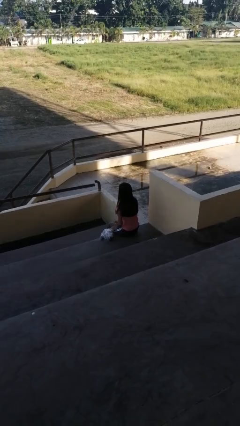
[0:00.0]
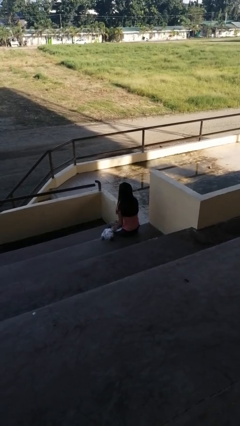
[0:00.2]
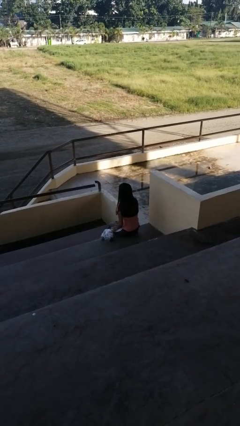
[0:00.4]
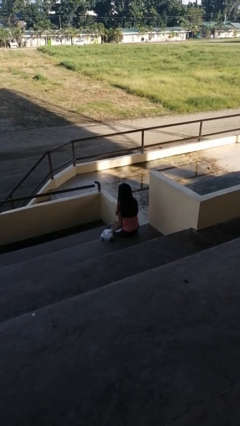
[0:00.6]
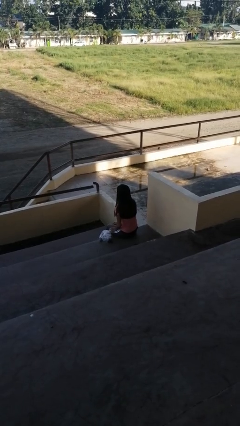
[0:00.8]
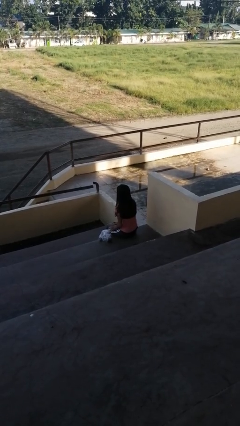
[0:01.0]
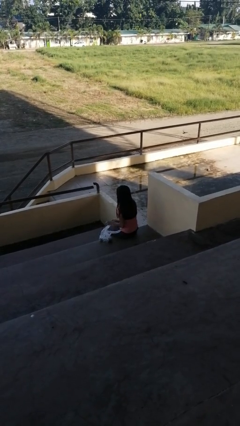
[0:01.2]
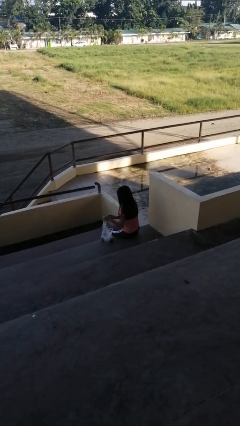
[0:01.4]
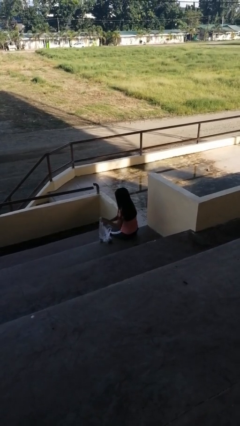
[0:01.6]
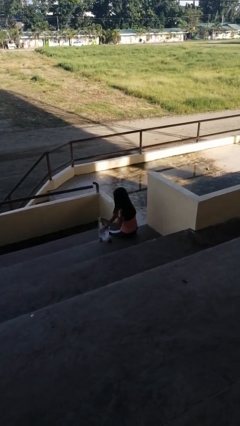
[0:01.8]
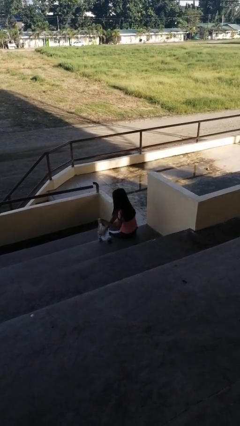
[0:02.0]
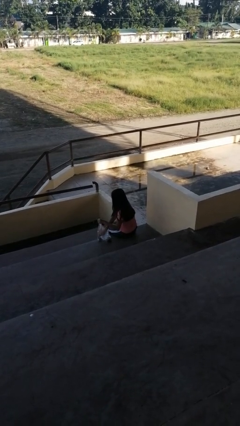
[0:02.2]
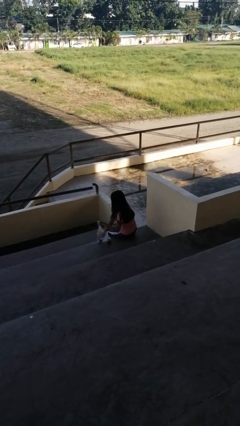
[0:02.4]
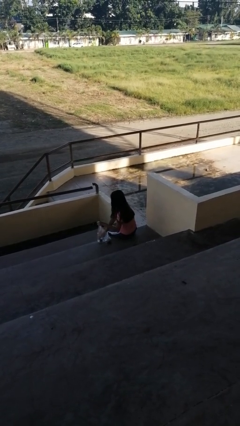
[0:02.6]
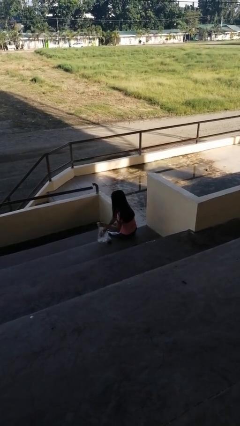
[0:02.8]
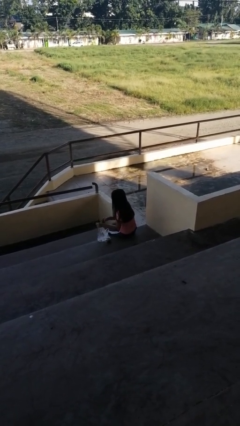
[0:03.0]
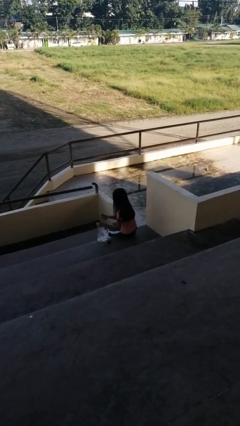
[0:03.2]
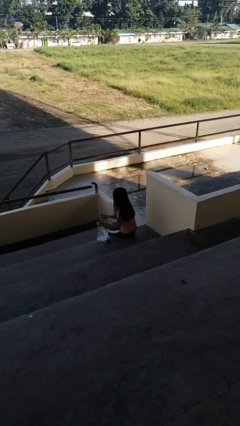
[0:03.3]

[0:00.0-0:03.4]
person takes object from bag

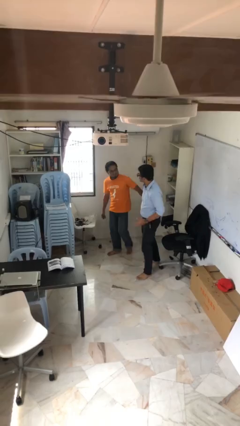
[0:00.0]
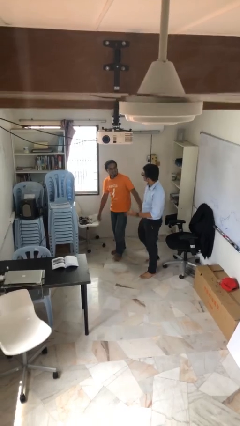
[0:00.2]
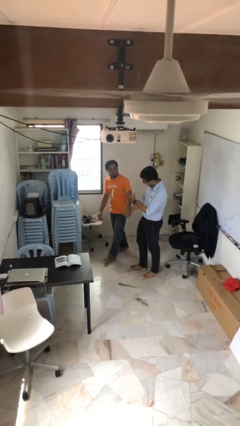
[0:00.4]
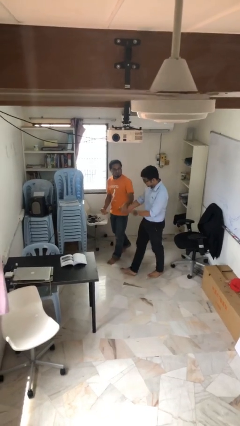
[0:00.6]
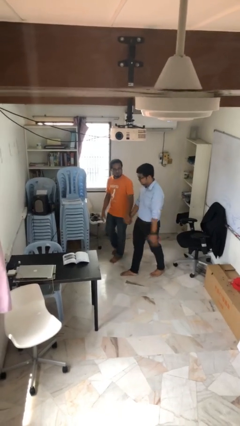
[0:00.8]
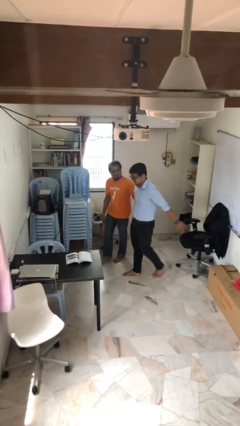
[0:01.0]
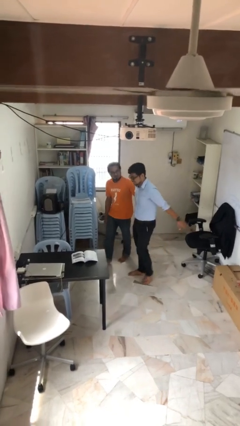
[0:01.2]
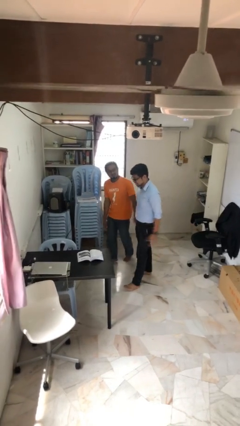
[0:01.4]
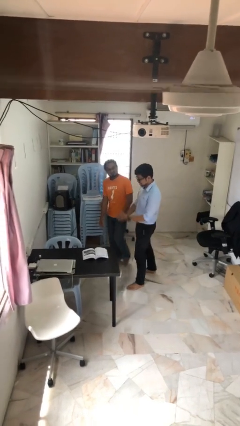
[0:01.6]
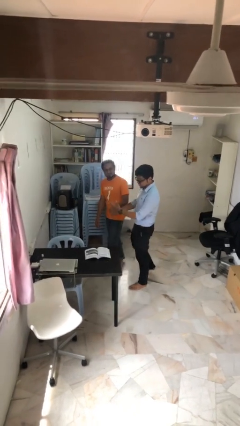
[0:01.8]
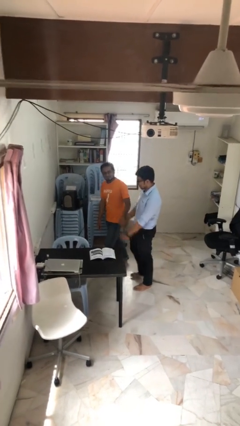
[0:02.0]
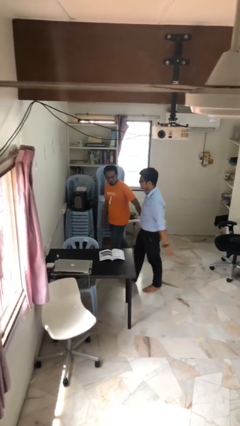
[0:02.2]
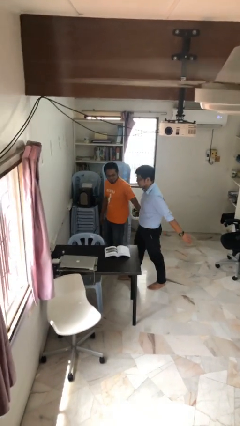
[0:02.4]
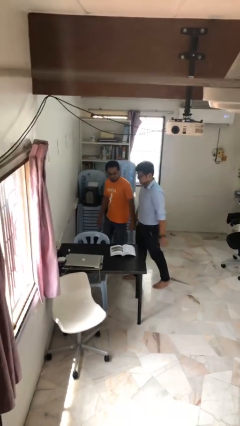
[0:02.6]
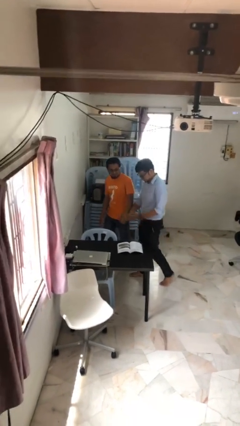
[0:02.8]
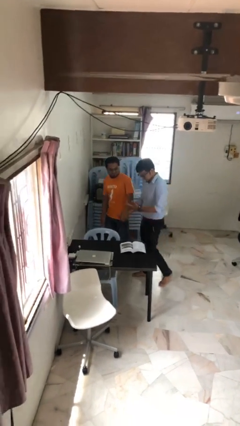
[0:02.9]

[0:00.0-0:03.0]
person holds hand

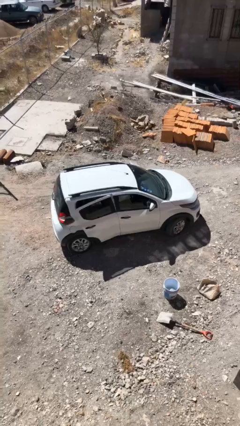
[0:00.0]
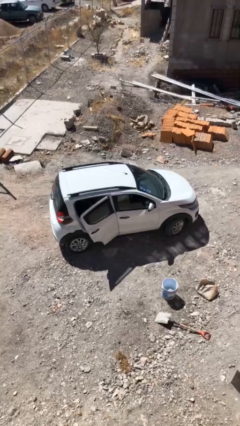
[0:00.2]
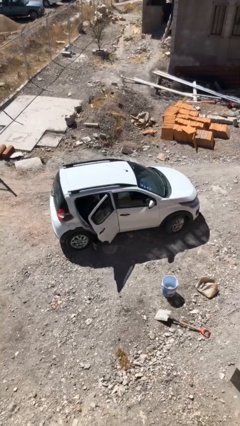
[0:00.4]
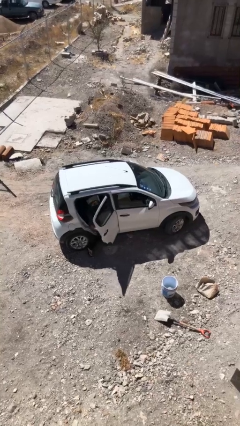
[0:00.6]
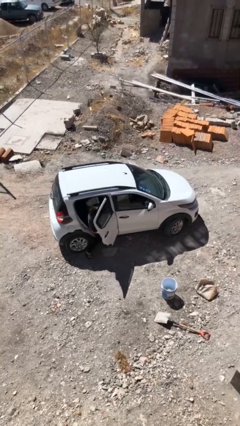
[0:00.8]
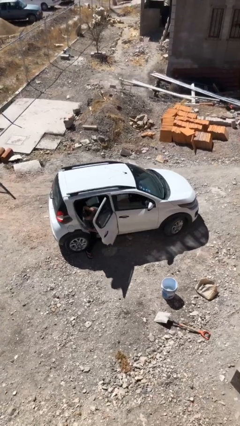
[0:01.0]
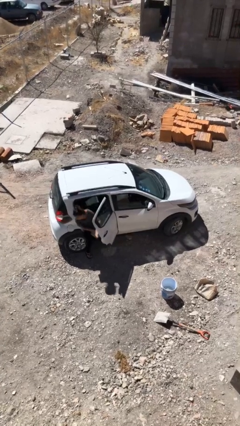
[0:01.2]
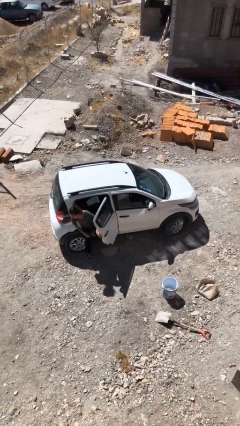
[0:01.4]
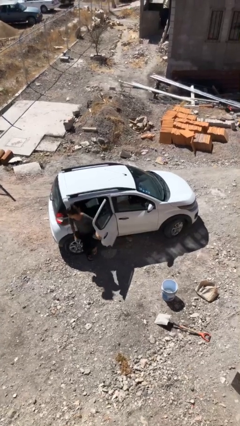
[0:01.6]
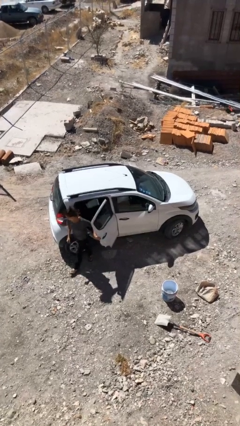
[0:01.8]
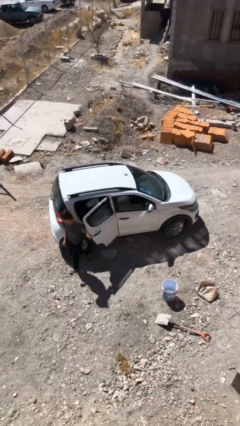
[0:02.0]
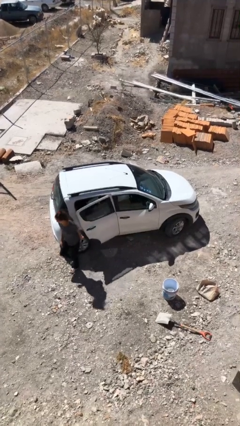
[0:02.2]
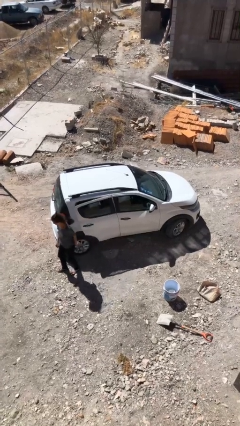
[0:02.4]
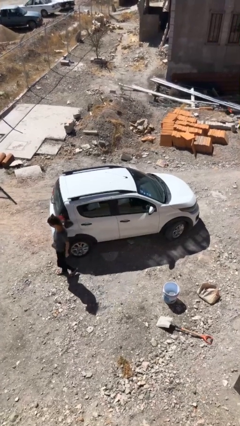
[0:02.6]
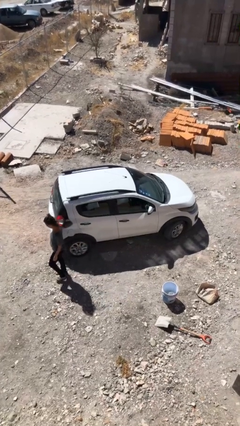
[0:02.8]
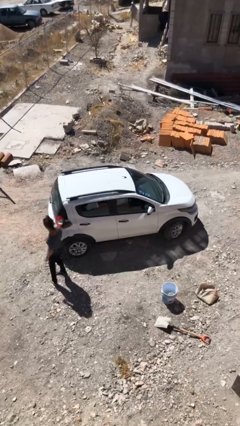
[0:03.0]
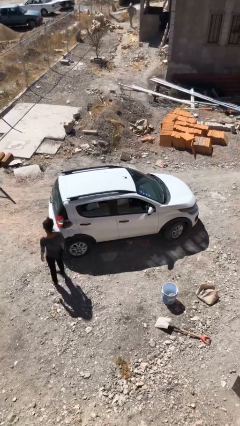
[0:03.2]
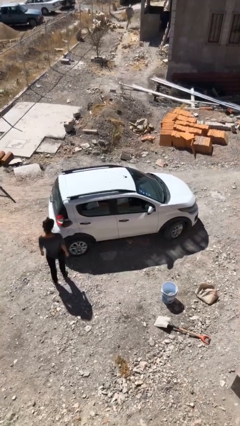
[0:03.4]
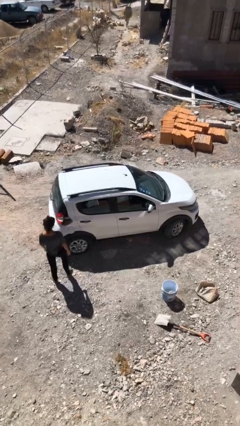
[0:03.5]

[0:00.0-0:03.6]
car drops off person

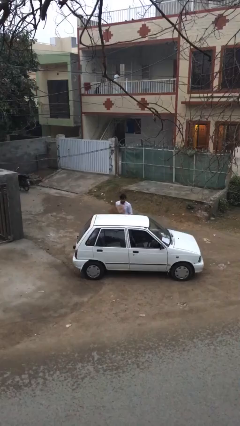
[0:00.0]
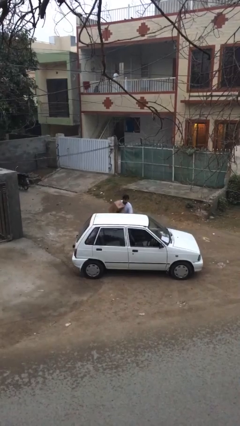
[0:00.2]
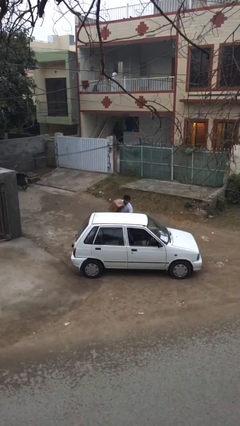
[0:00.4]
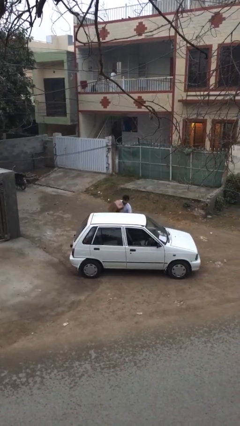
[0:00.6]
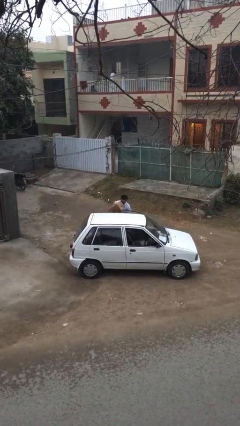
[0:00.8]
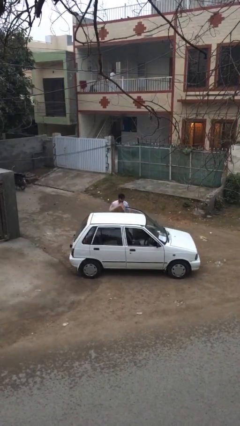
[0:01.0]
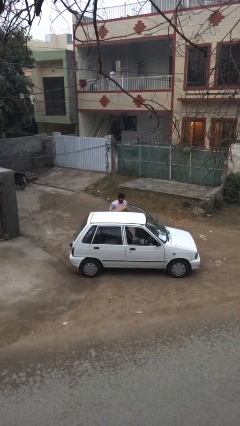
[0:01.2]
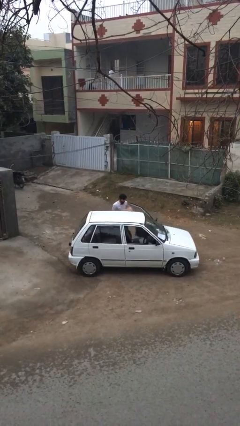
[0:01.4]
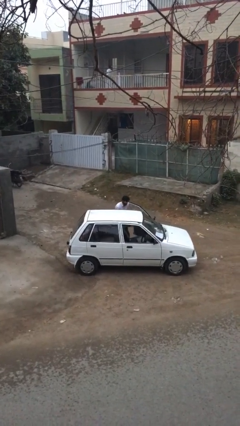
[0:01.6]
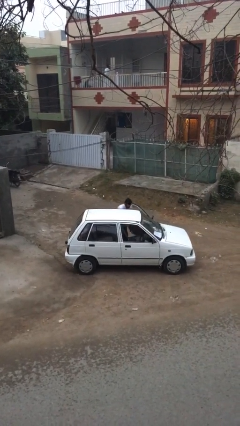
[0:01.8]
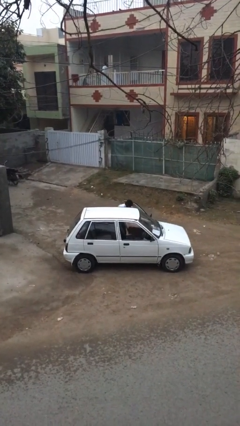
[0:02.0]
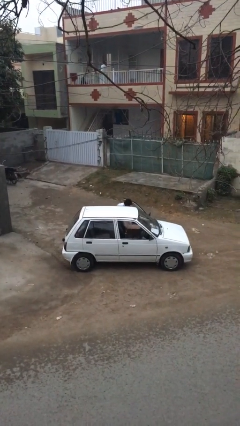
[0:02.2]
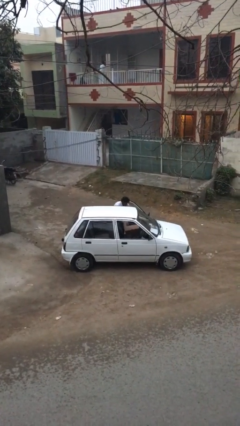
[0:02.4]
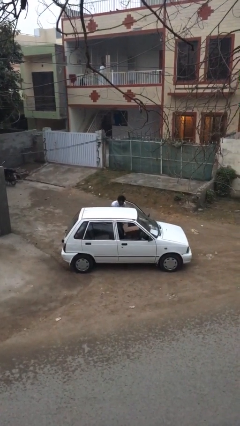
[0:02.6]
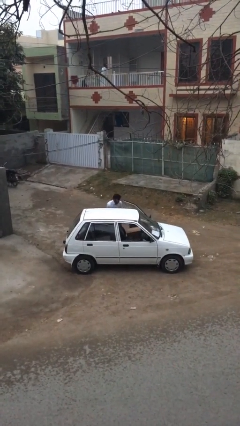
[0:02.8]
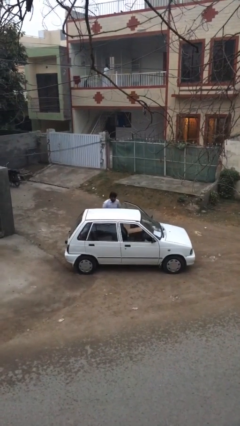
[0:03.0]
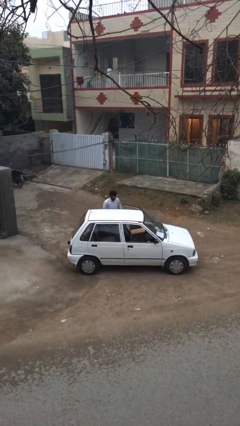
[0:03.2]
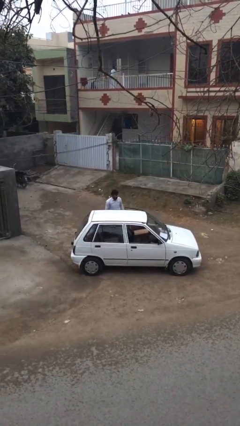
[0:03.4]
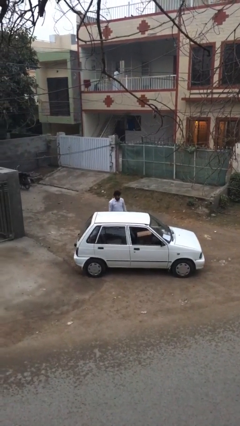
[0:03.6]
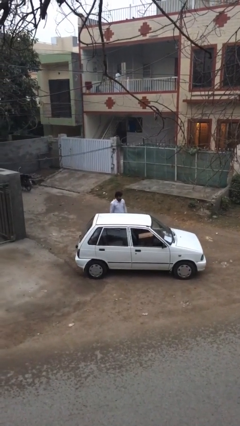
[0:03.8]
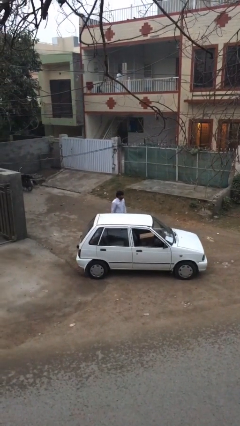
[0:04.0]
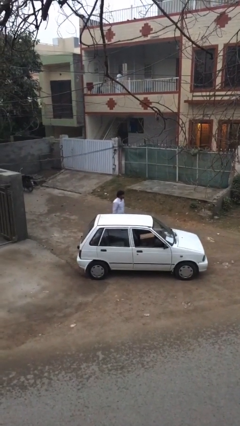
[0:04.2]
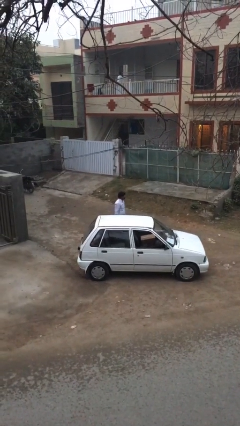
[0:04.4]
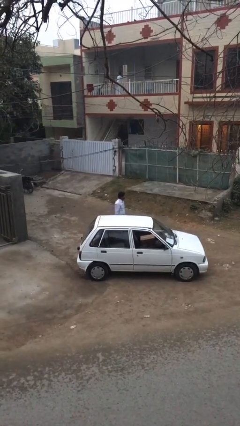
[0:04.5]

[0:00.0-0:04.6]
person loads car

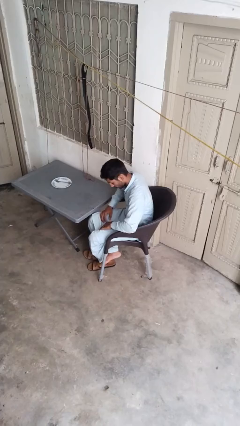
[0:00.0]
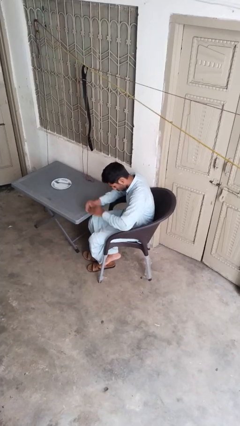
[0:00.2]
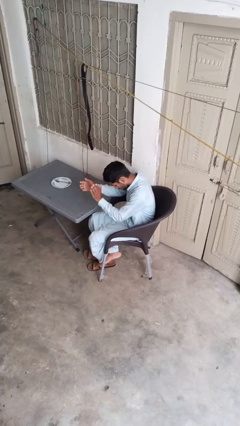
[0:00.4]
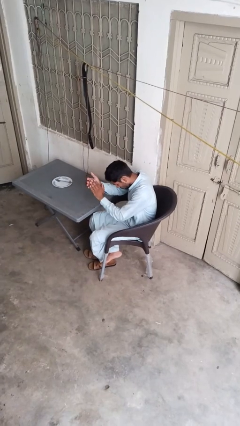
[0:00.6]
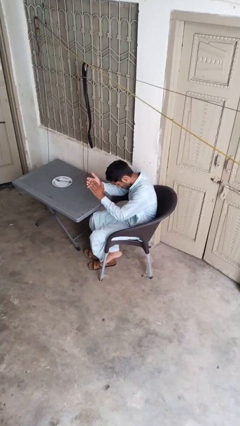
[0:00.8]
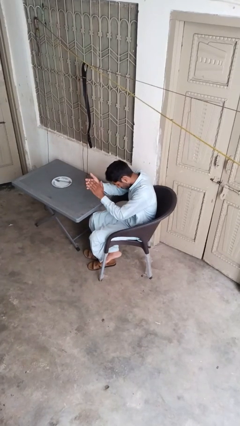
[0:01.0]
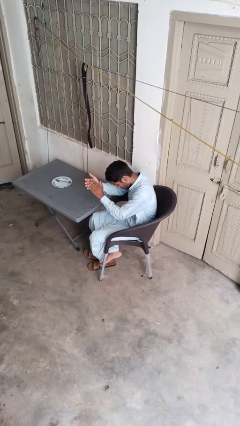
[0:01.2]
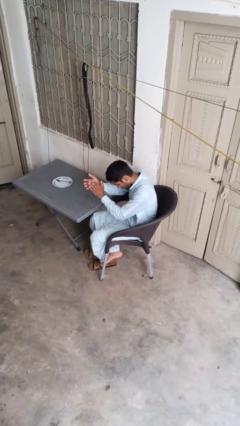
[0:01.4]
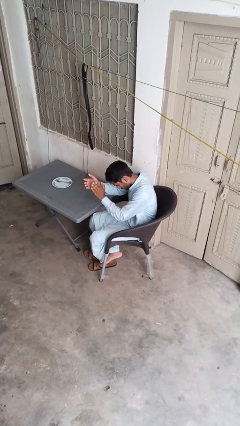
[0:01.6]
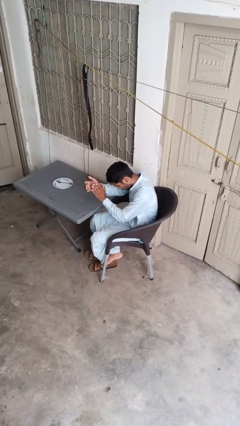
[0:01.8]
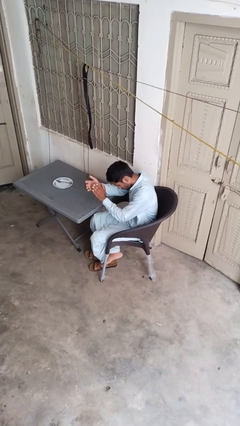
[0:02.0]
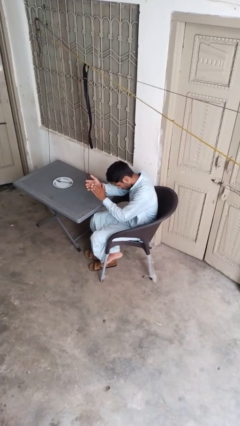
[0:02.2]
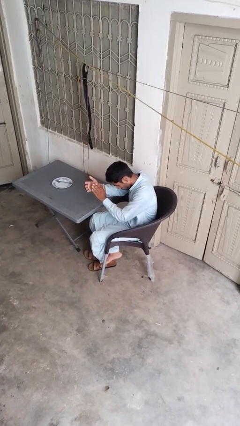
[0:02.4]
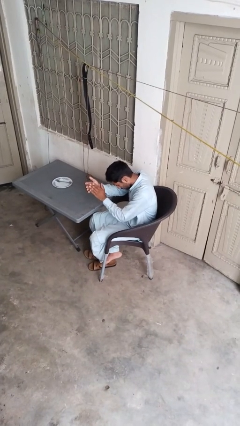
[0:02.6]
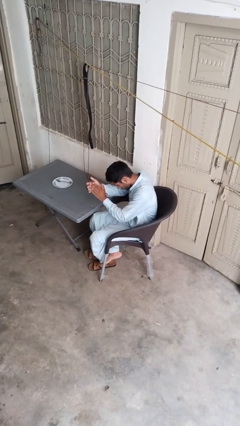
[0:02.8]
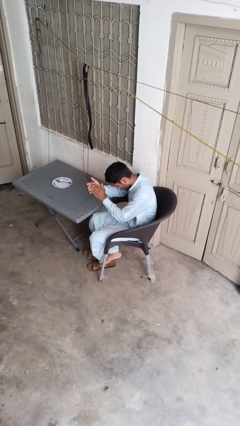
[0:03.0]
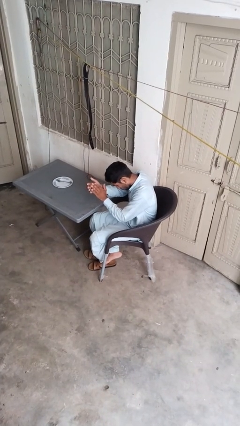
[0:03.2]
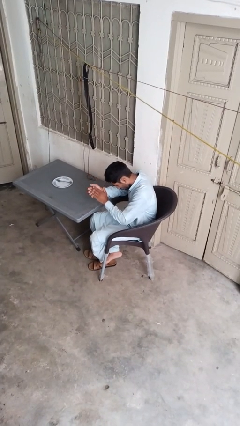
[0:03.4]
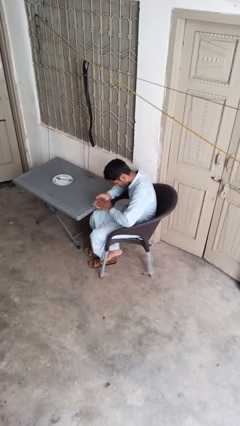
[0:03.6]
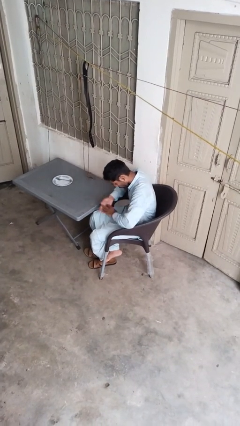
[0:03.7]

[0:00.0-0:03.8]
person claps hands
